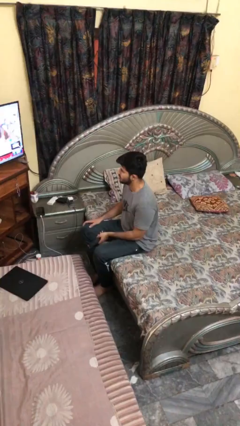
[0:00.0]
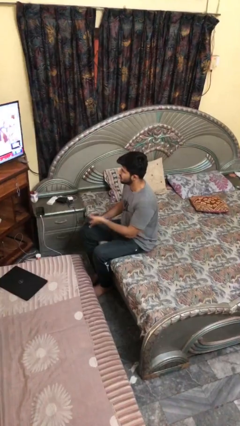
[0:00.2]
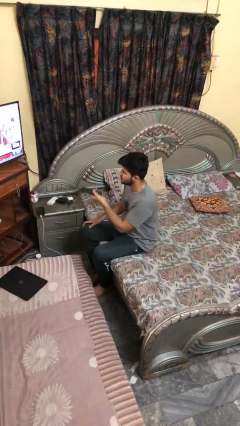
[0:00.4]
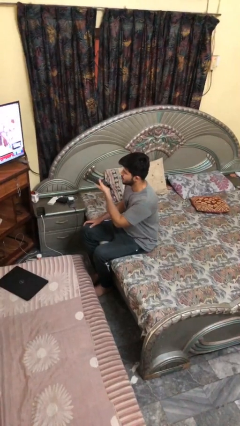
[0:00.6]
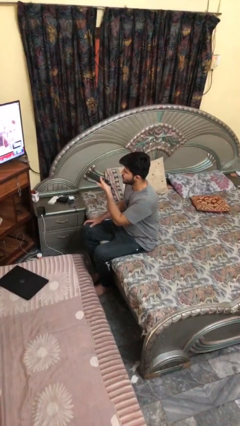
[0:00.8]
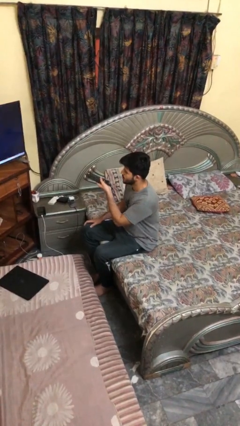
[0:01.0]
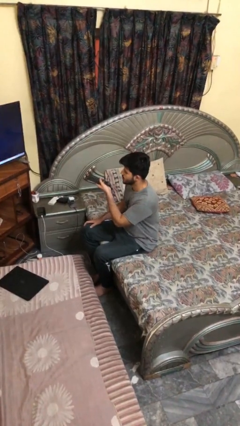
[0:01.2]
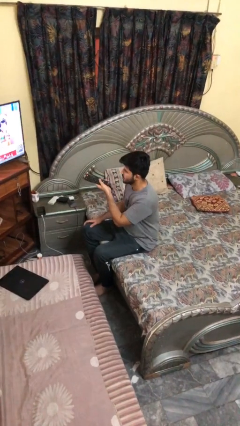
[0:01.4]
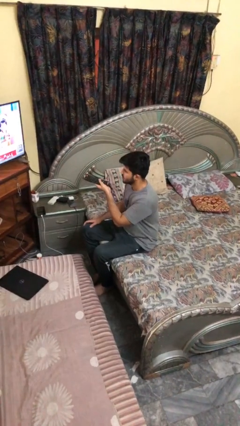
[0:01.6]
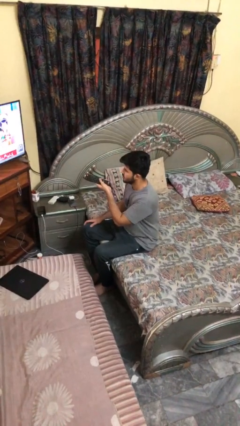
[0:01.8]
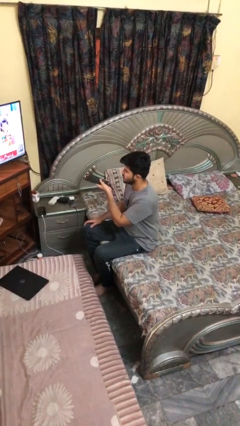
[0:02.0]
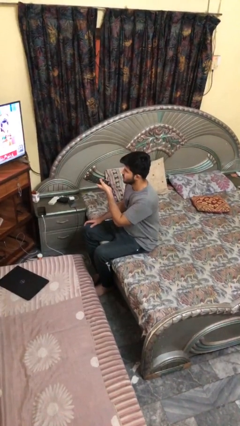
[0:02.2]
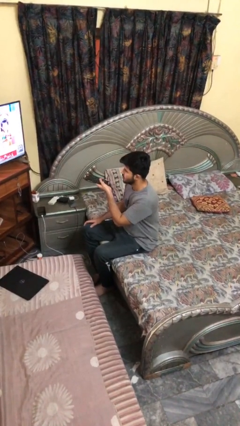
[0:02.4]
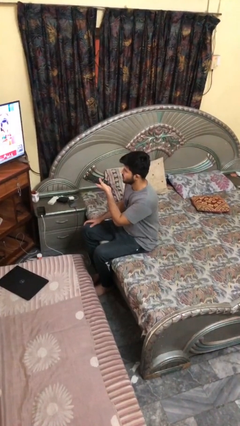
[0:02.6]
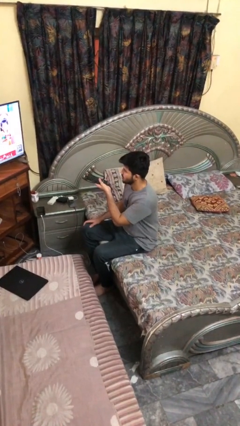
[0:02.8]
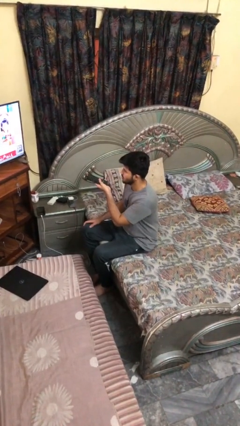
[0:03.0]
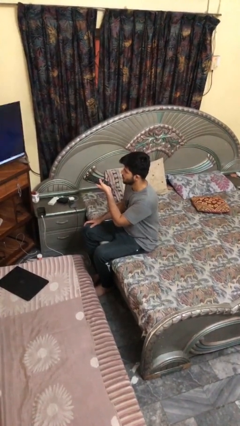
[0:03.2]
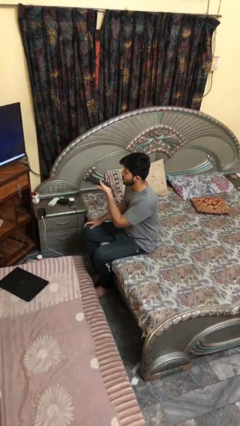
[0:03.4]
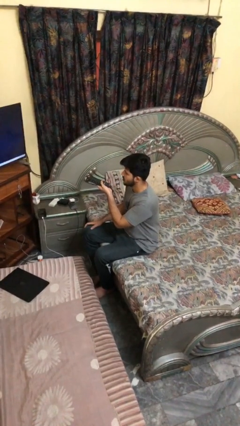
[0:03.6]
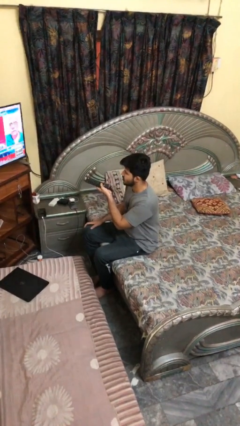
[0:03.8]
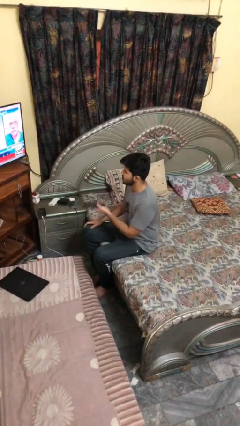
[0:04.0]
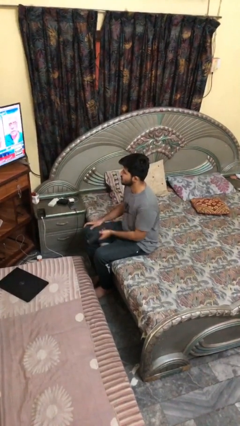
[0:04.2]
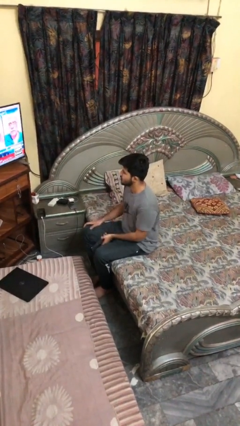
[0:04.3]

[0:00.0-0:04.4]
person uses television remote

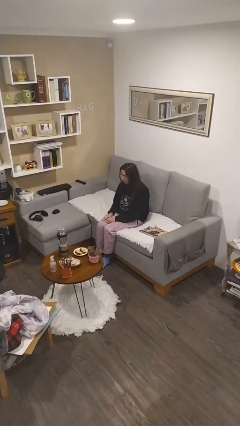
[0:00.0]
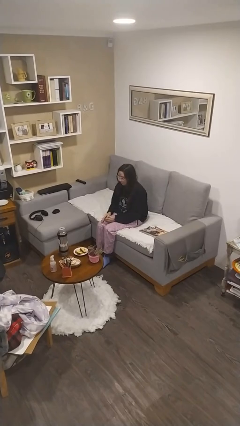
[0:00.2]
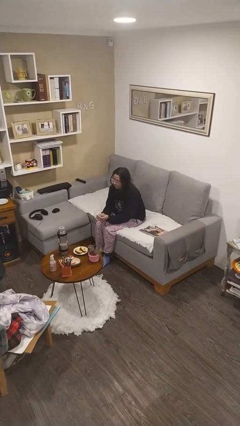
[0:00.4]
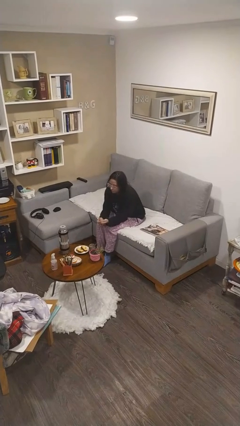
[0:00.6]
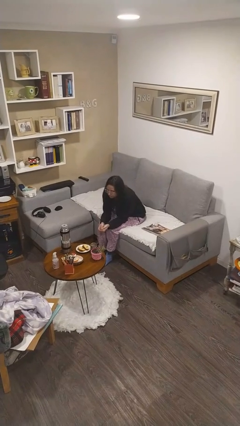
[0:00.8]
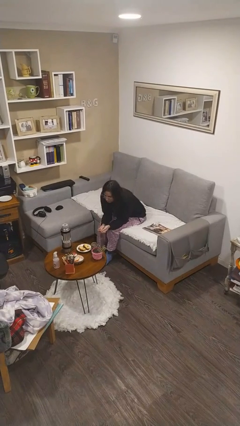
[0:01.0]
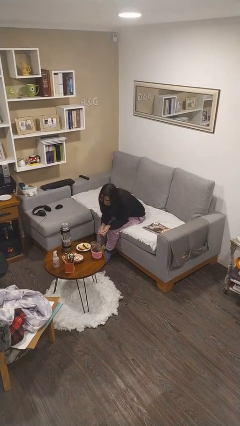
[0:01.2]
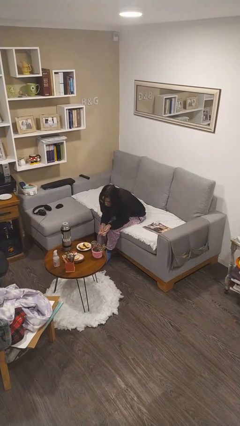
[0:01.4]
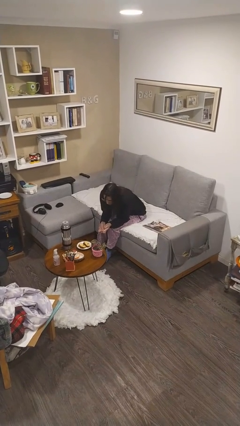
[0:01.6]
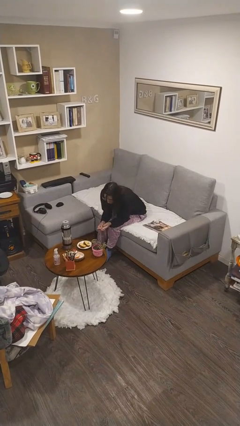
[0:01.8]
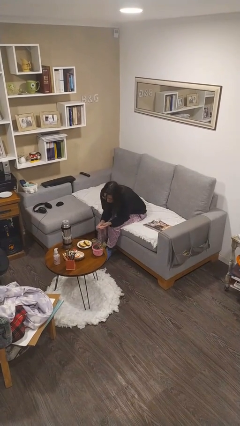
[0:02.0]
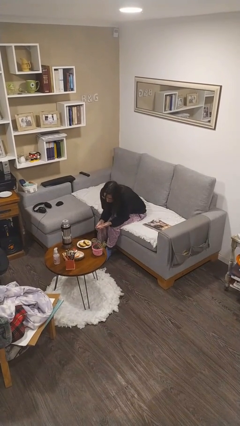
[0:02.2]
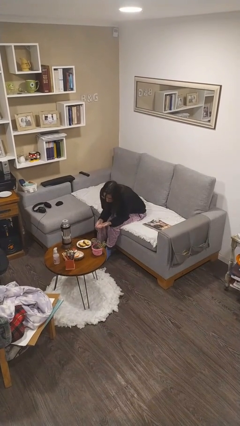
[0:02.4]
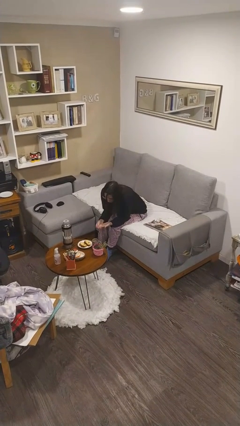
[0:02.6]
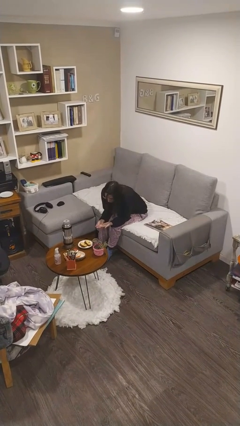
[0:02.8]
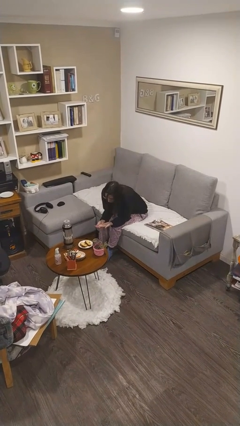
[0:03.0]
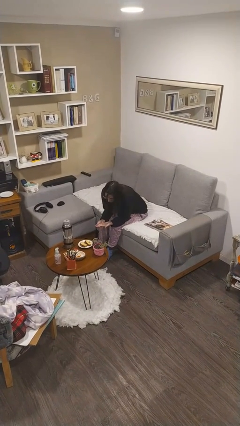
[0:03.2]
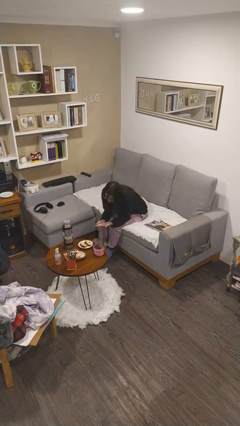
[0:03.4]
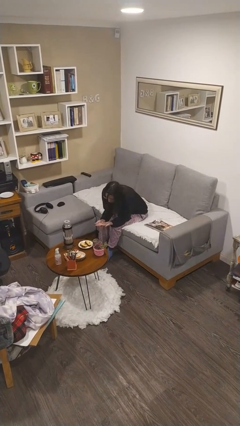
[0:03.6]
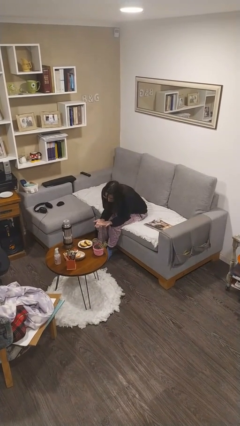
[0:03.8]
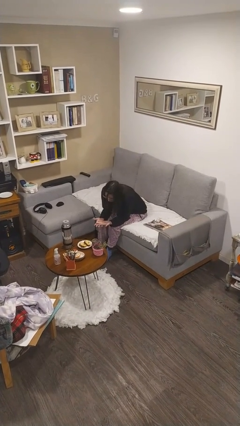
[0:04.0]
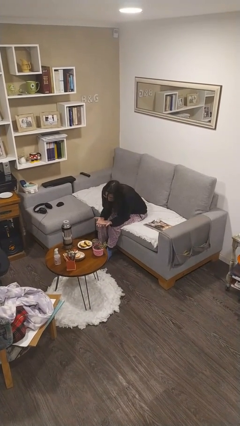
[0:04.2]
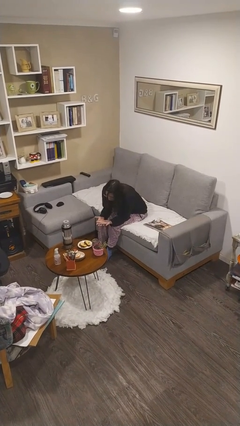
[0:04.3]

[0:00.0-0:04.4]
person looks at hands in lap

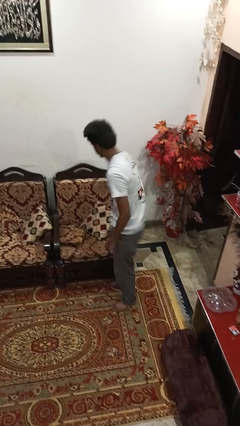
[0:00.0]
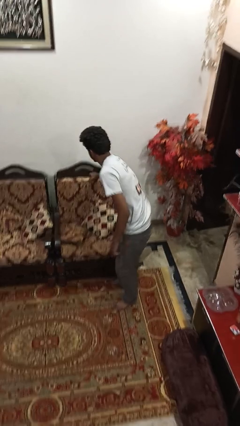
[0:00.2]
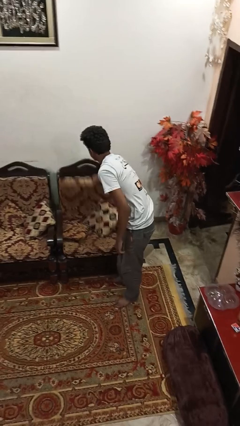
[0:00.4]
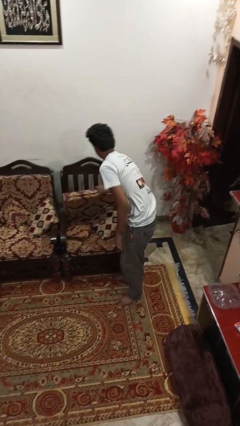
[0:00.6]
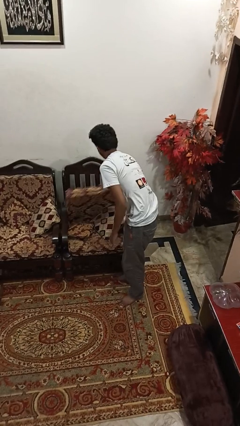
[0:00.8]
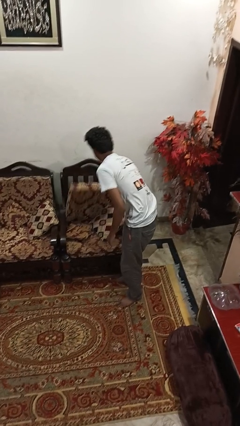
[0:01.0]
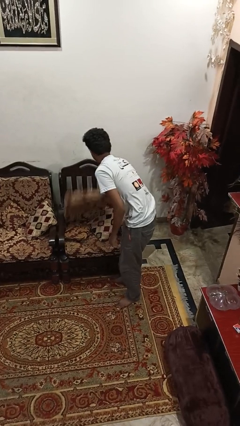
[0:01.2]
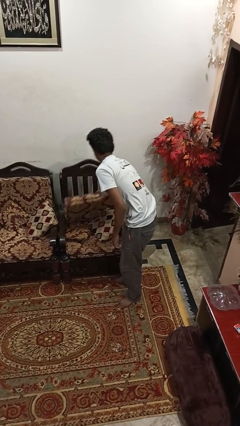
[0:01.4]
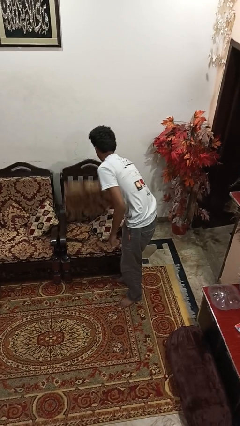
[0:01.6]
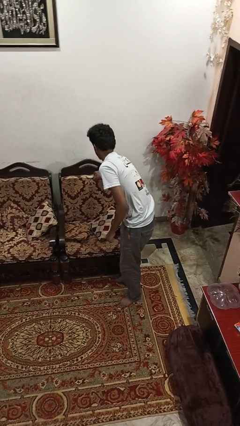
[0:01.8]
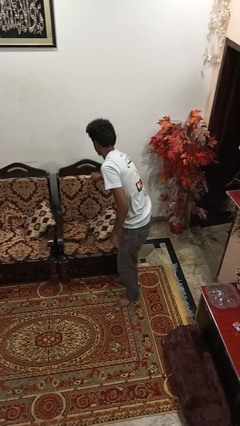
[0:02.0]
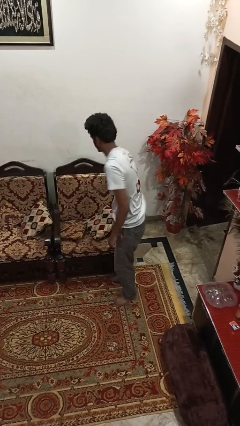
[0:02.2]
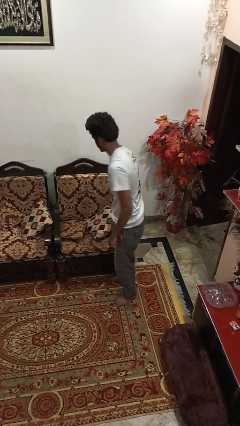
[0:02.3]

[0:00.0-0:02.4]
person searches in couch

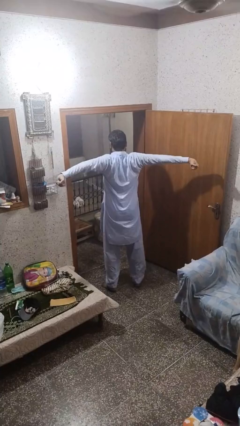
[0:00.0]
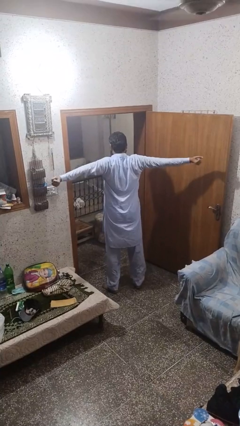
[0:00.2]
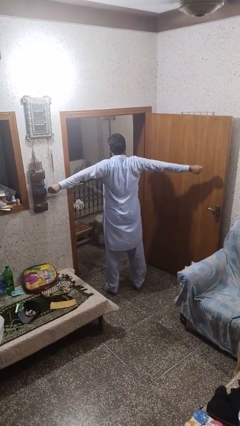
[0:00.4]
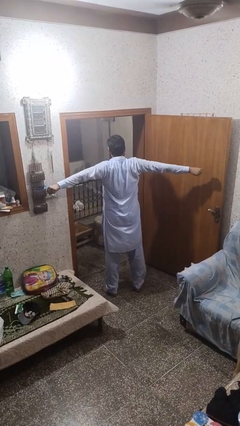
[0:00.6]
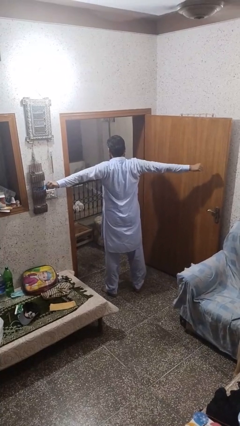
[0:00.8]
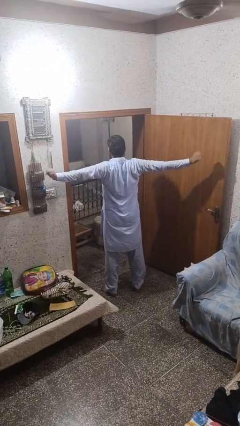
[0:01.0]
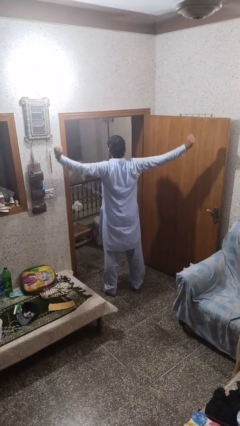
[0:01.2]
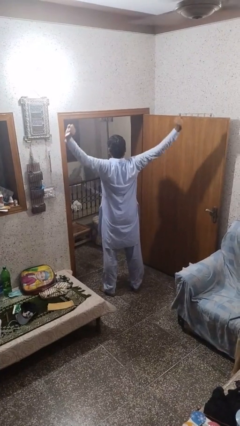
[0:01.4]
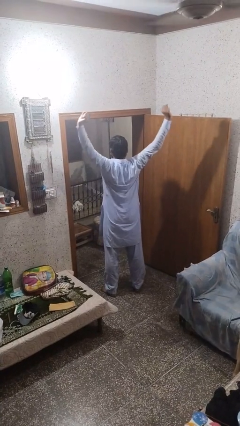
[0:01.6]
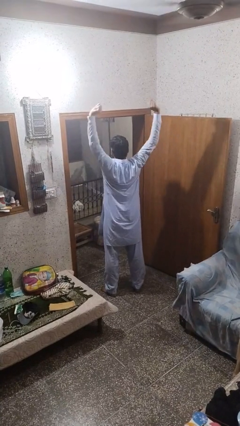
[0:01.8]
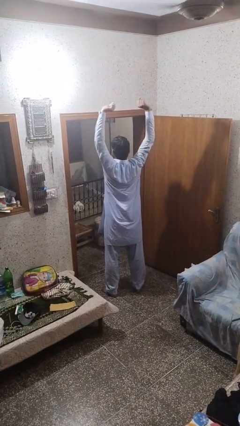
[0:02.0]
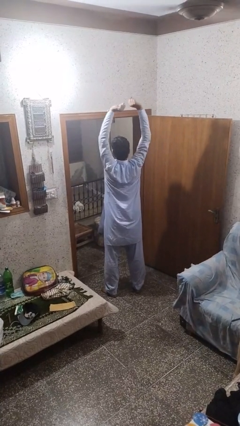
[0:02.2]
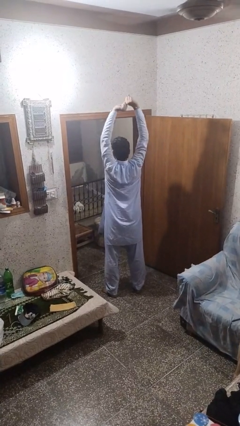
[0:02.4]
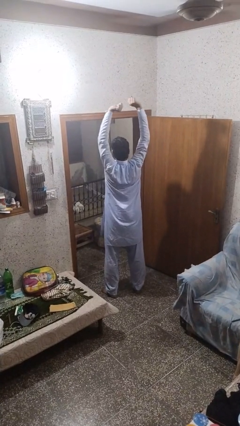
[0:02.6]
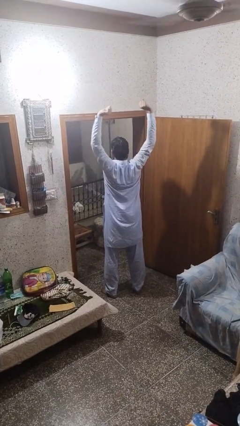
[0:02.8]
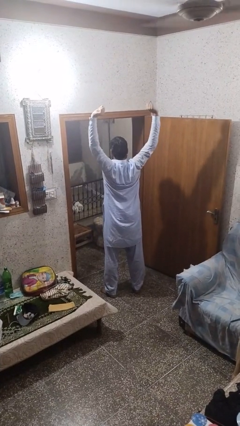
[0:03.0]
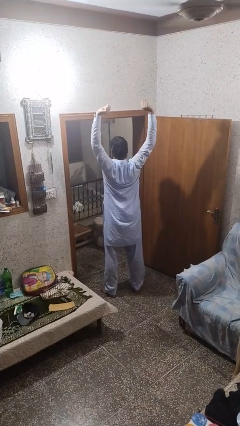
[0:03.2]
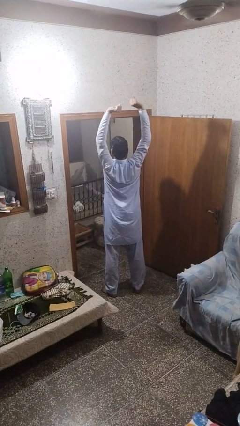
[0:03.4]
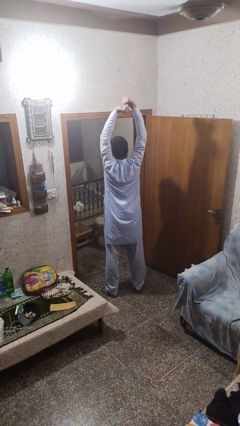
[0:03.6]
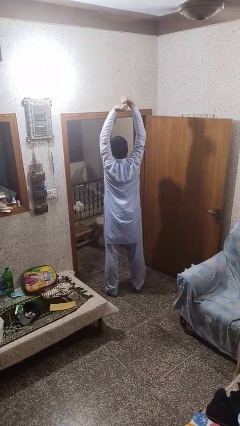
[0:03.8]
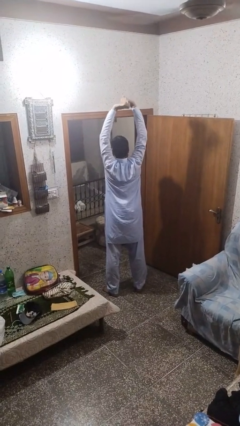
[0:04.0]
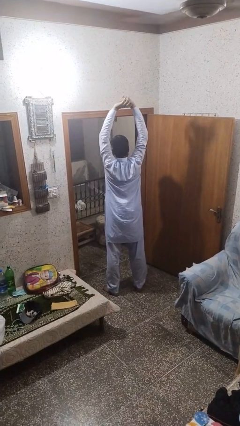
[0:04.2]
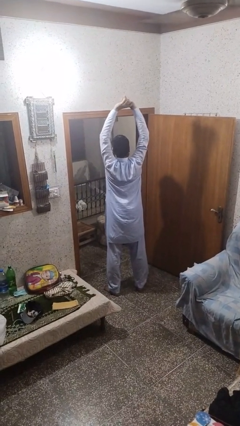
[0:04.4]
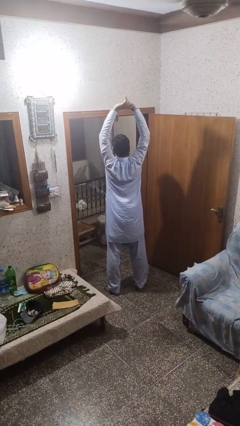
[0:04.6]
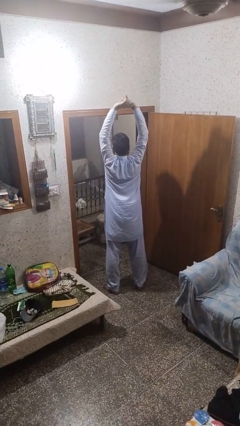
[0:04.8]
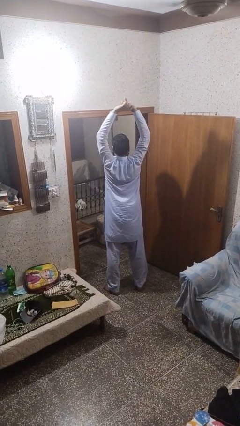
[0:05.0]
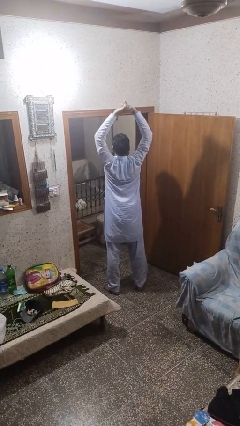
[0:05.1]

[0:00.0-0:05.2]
person stretches arms over head

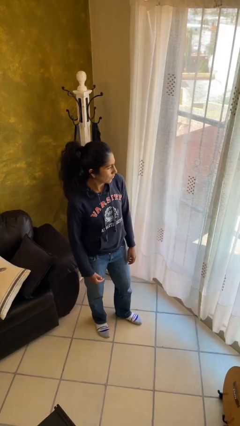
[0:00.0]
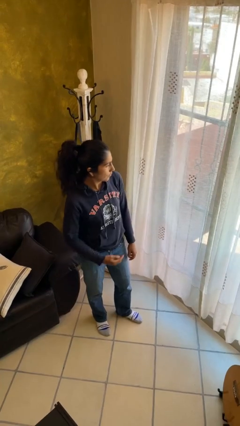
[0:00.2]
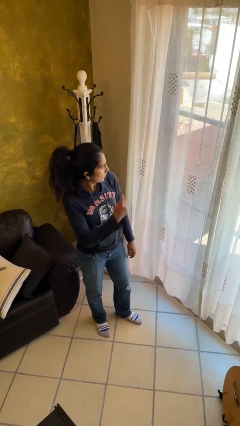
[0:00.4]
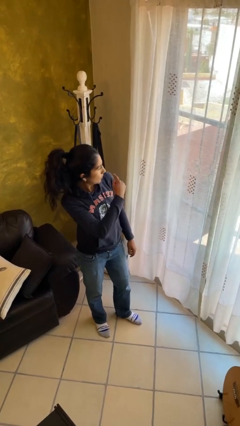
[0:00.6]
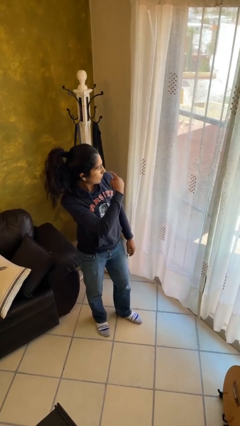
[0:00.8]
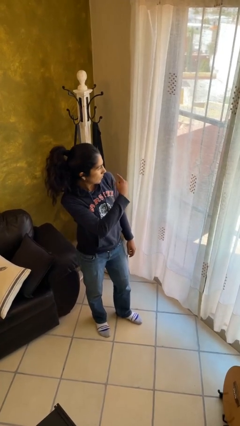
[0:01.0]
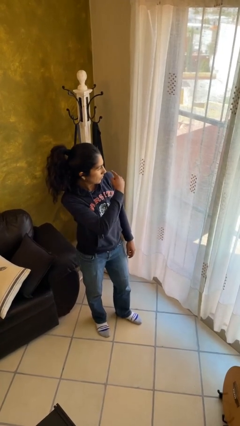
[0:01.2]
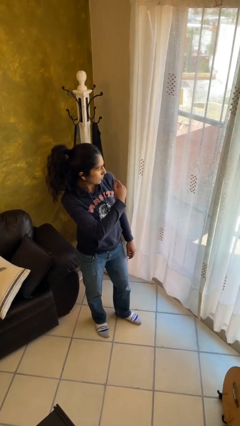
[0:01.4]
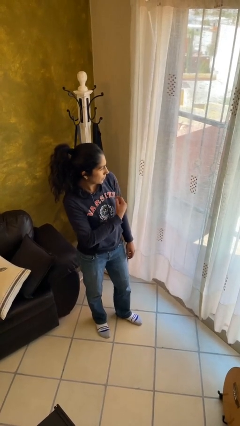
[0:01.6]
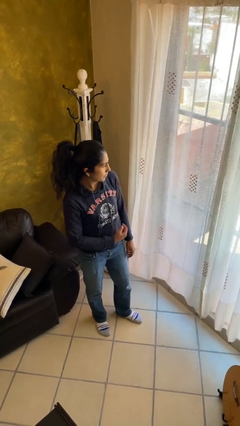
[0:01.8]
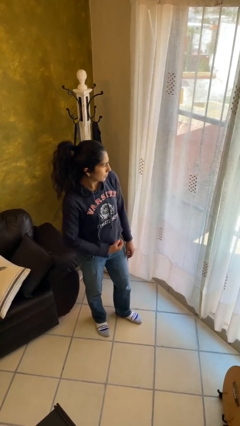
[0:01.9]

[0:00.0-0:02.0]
person gestures behind me
